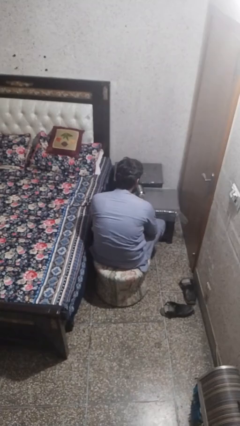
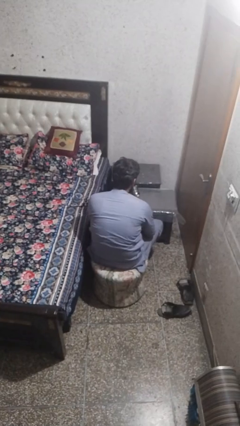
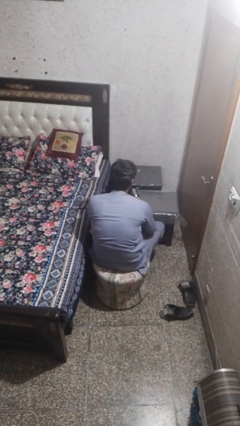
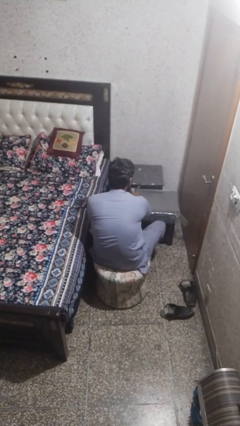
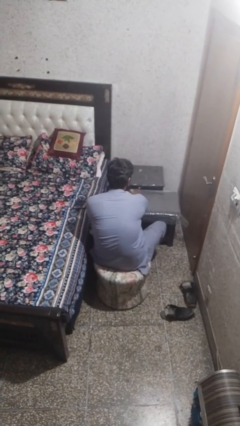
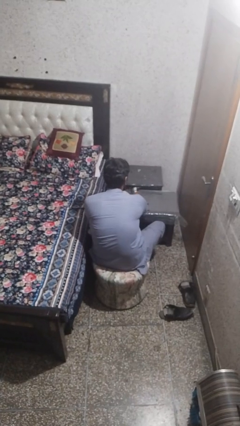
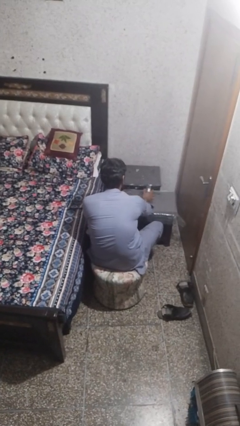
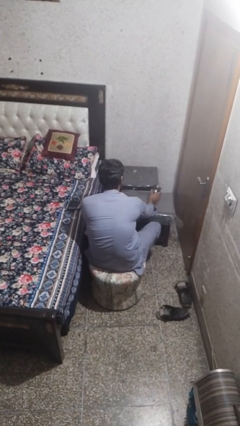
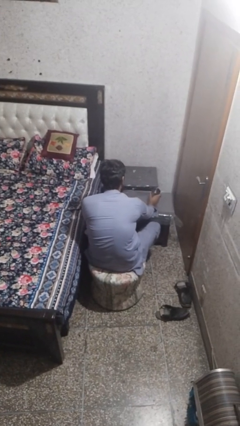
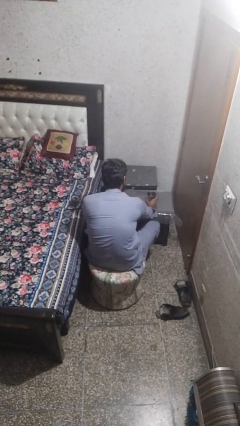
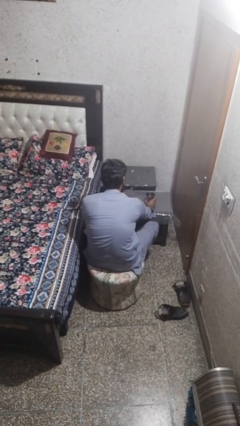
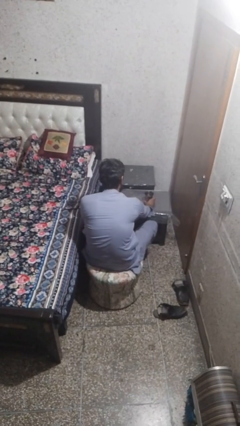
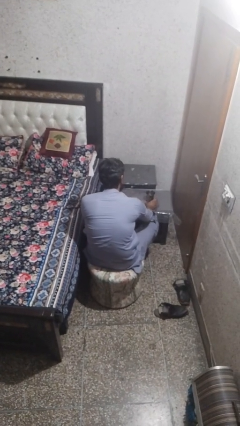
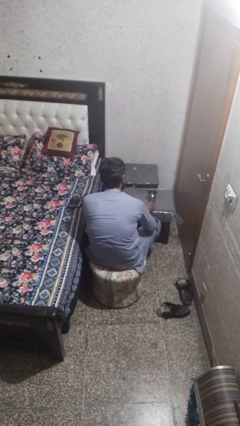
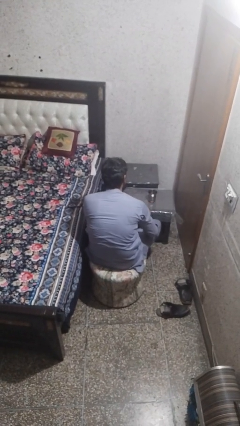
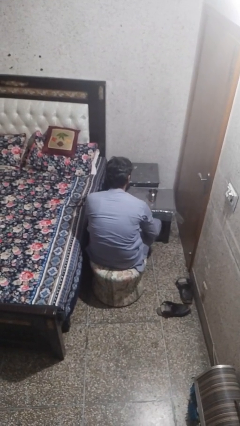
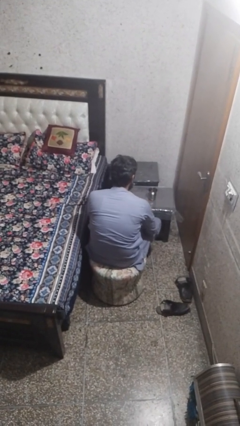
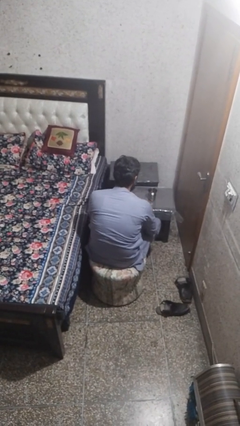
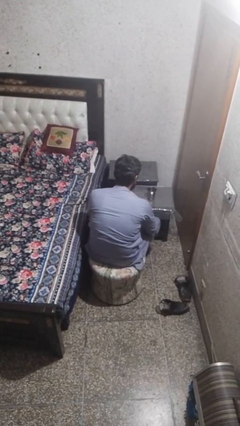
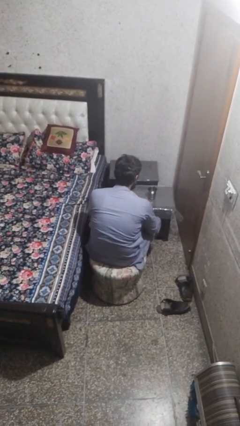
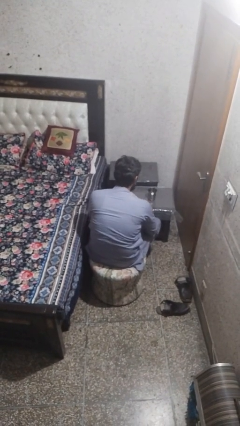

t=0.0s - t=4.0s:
person sets upright glass

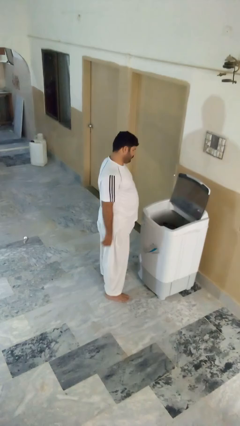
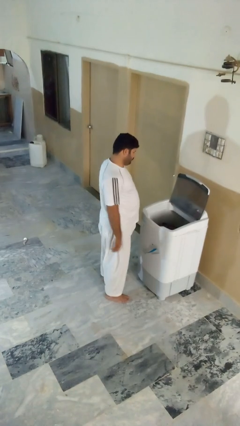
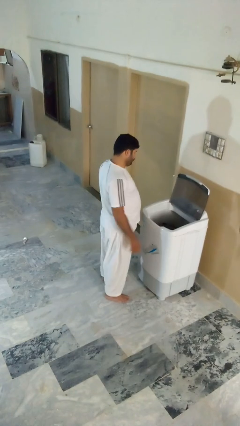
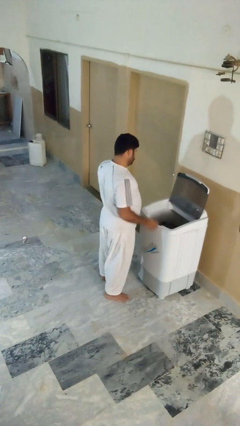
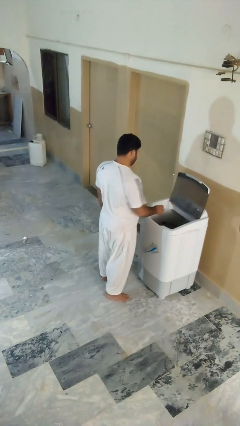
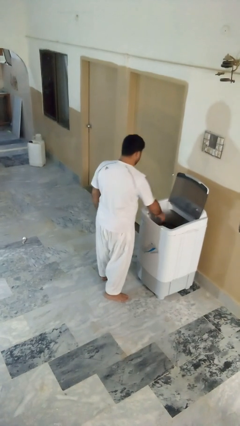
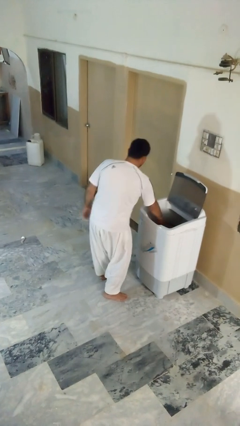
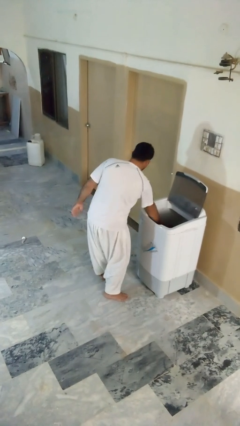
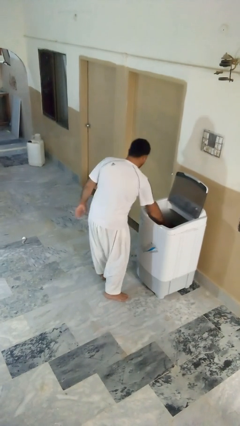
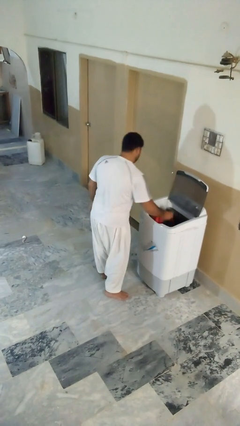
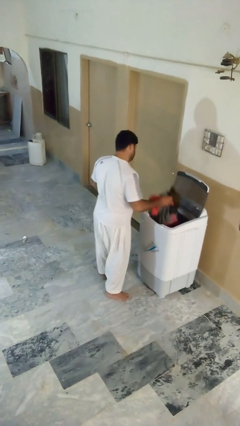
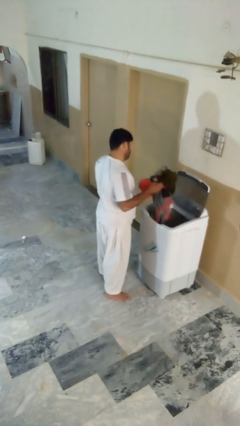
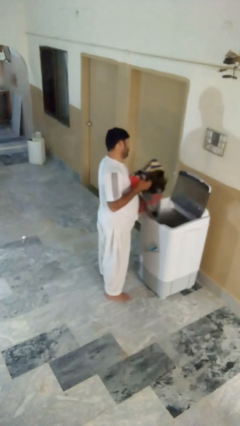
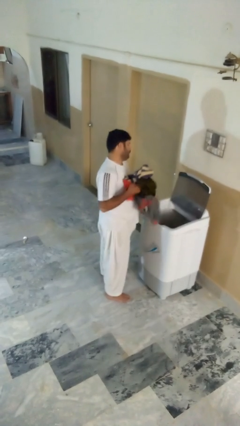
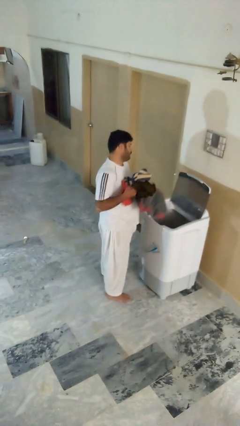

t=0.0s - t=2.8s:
person unloads clotheswasher

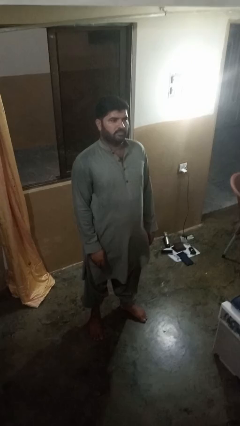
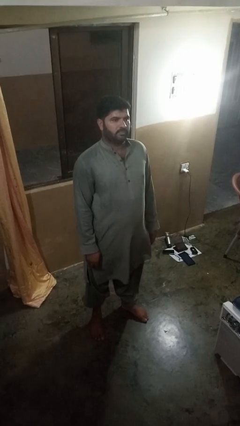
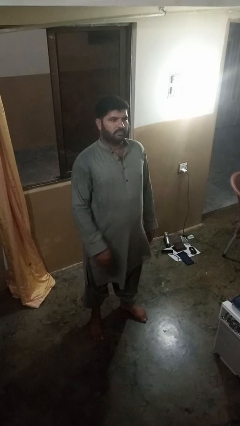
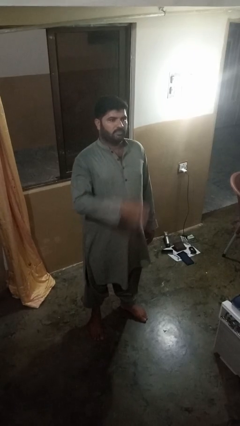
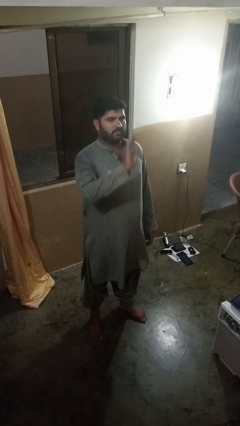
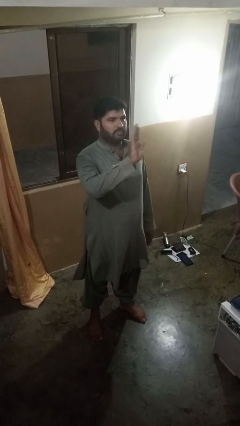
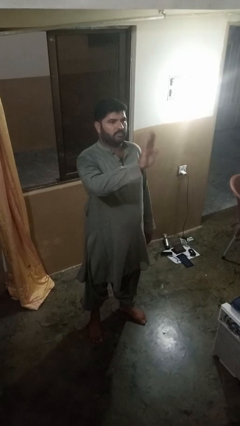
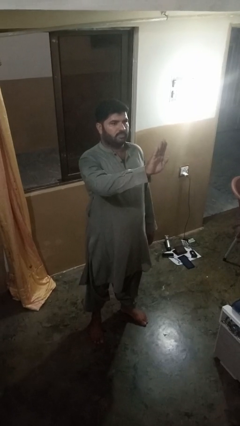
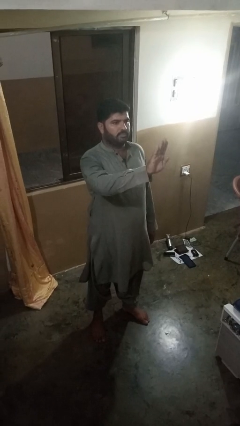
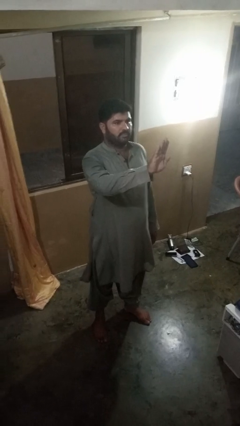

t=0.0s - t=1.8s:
person gestures stop

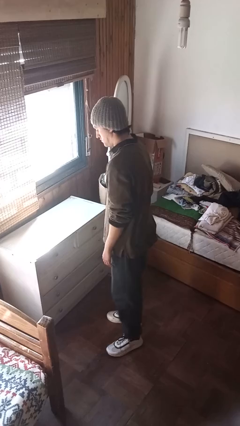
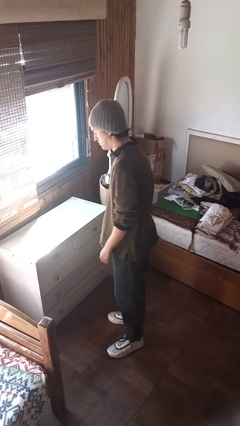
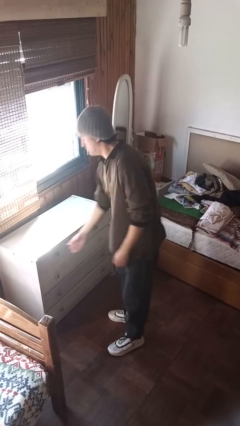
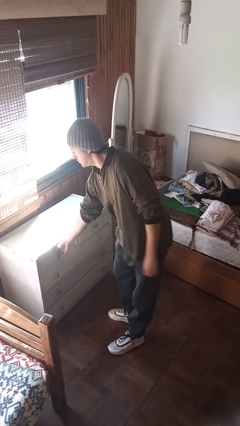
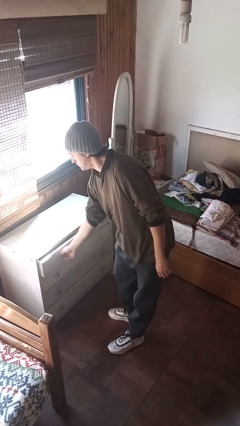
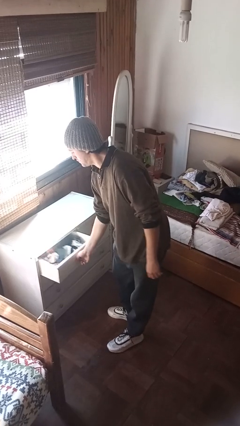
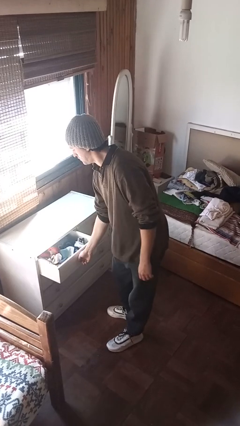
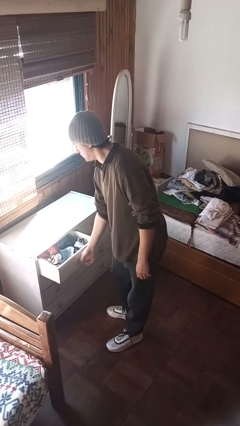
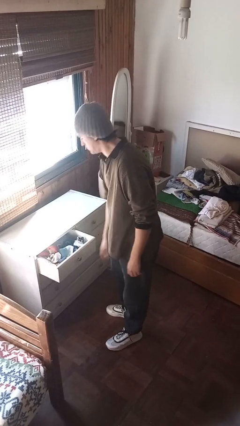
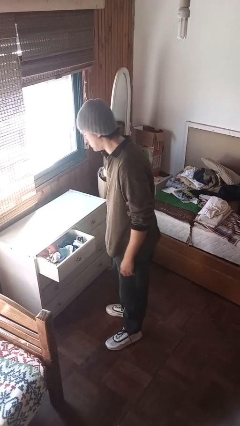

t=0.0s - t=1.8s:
person opens dresser drawer

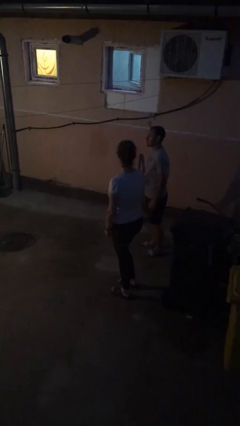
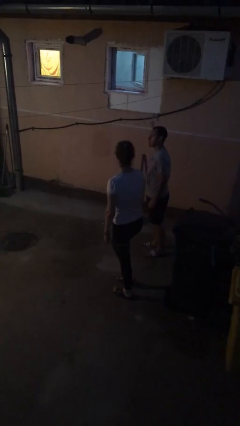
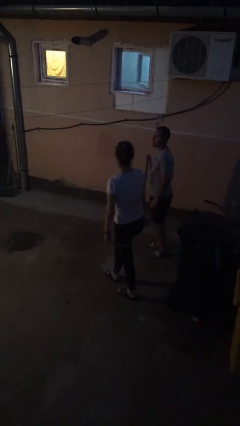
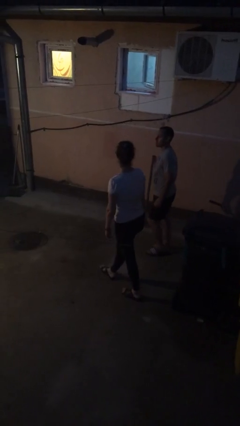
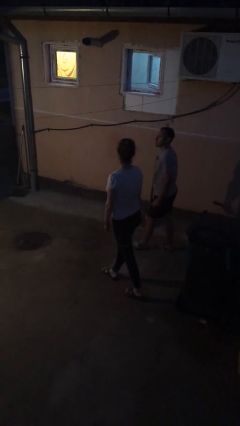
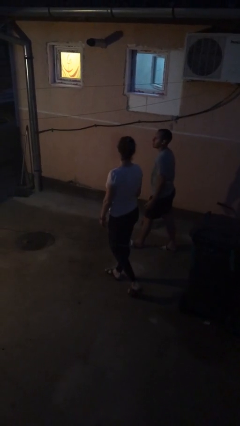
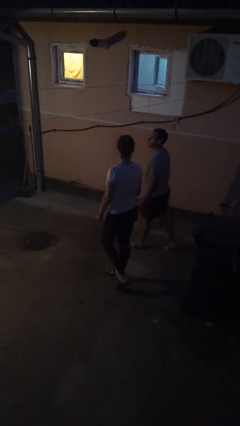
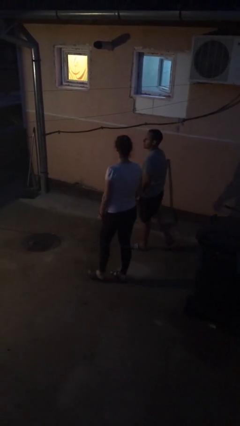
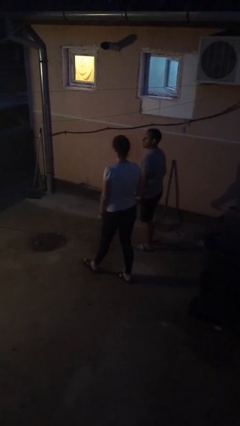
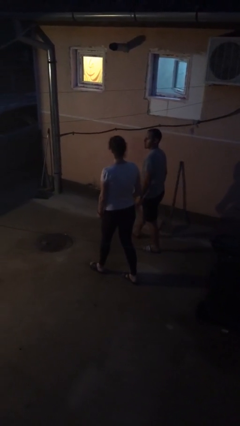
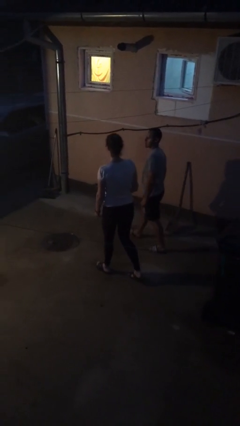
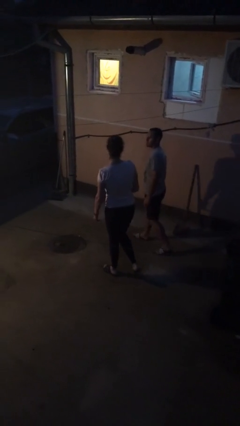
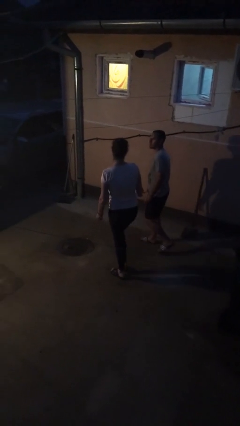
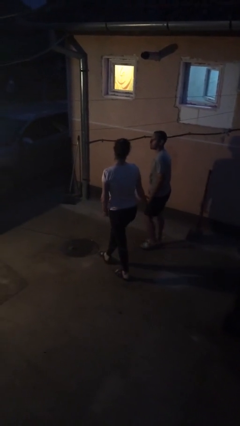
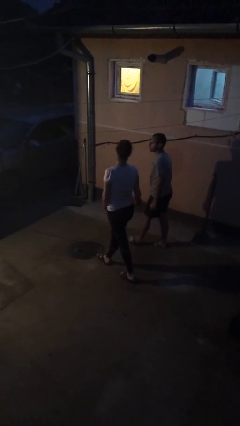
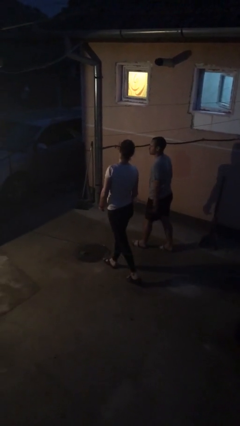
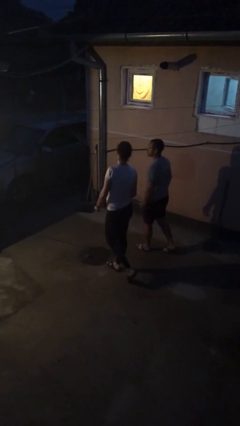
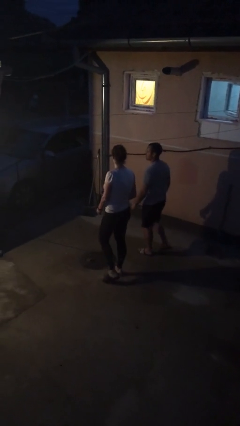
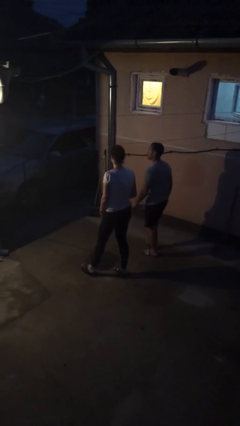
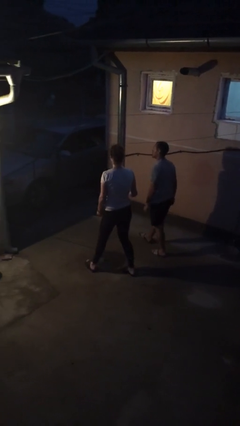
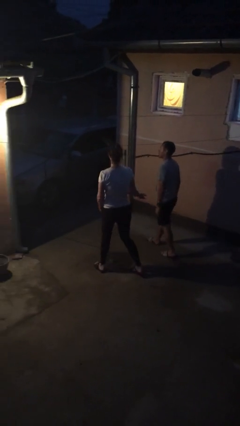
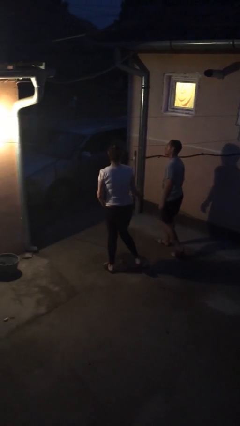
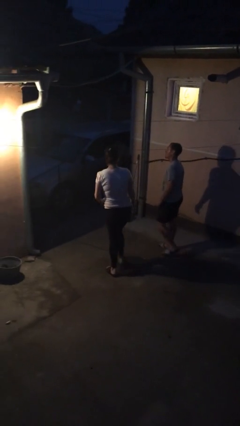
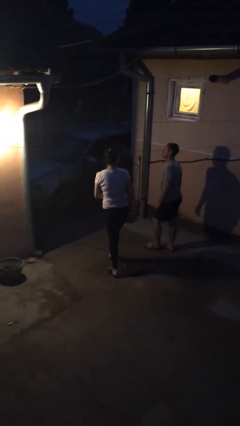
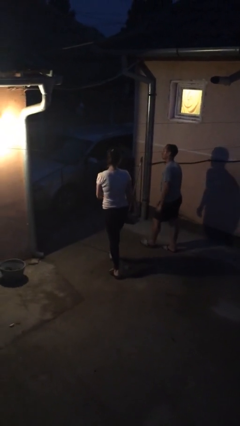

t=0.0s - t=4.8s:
person talks to person

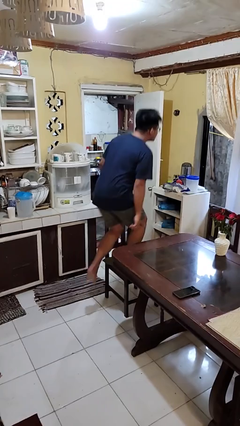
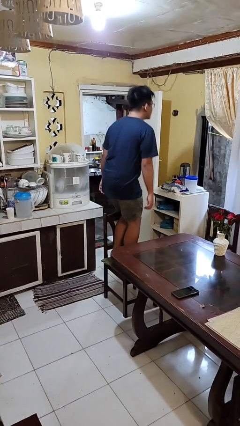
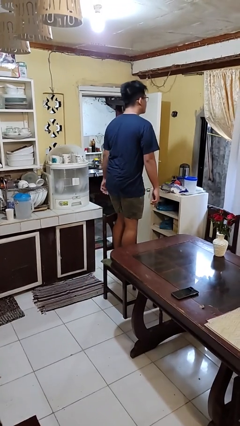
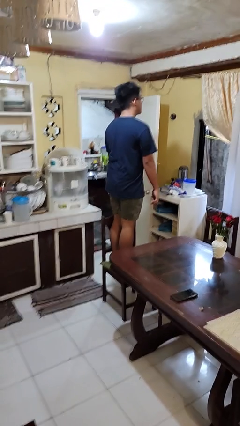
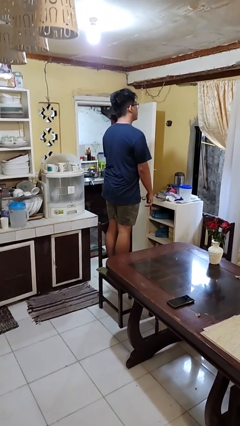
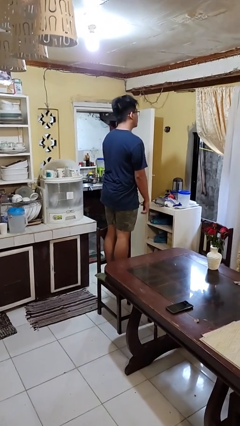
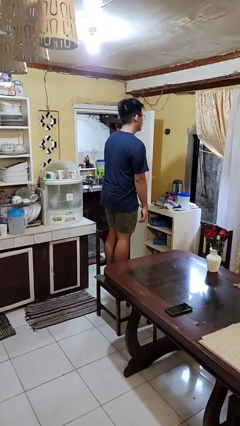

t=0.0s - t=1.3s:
person climbs on chair

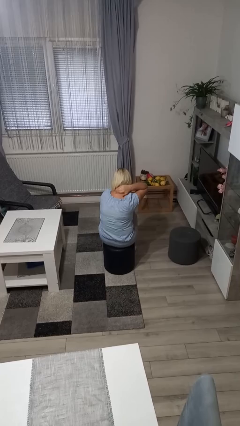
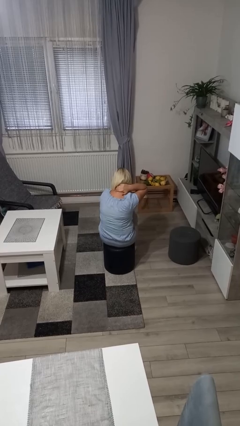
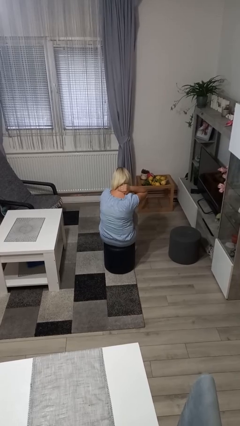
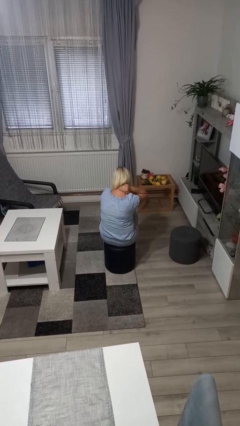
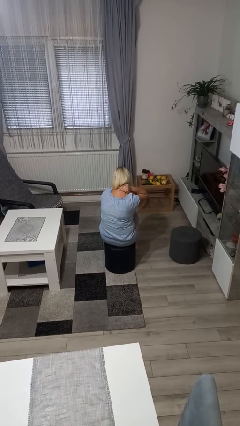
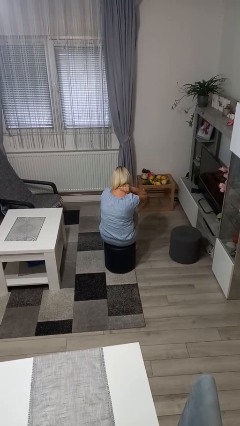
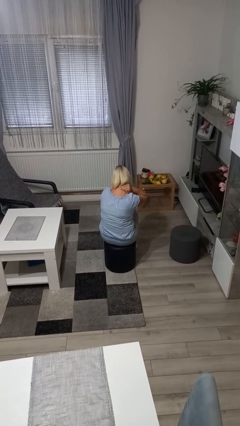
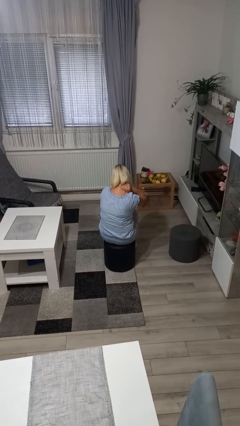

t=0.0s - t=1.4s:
person rubs neck
